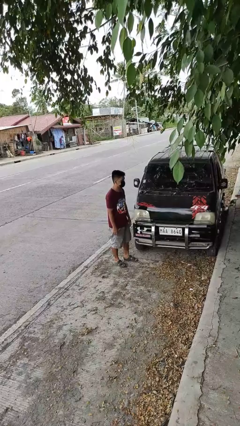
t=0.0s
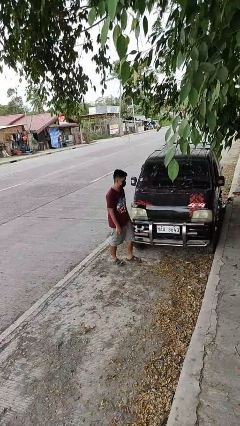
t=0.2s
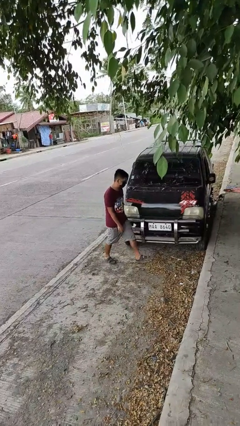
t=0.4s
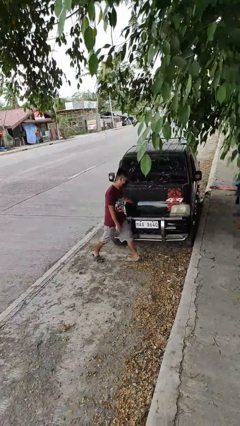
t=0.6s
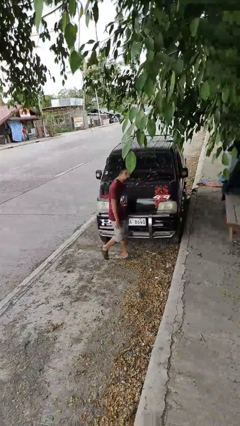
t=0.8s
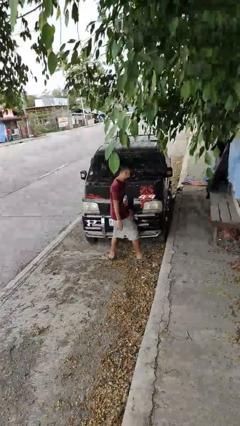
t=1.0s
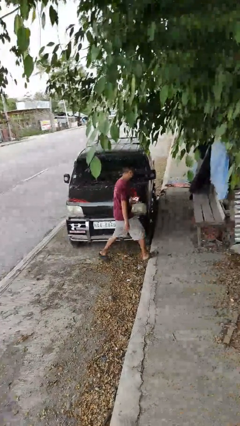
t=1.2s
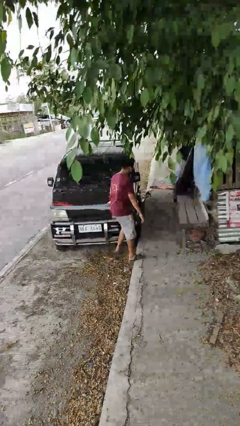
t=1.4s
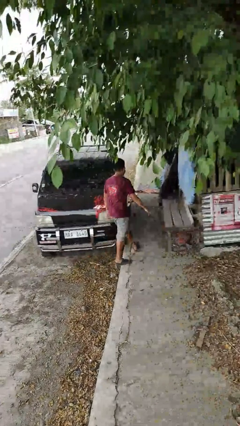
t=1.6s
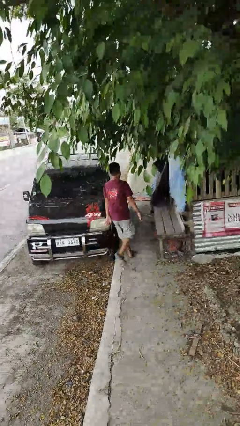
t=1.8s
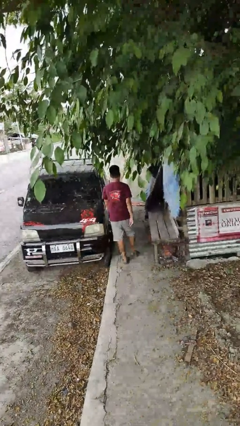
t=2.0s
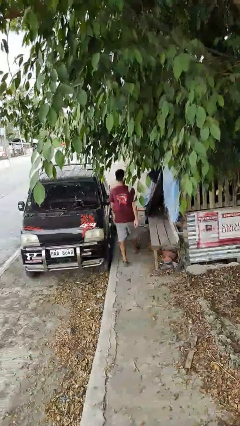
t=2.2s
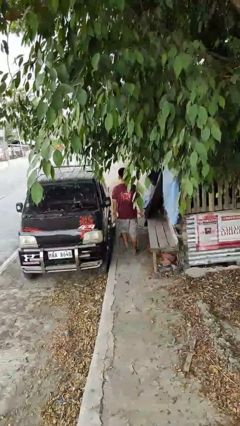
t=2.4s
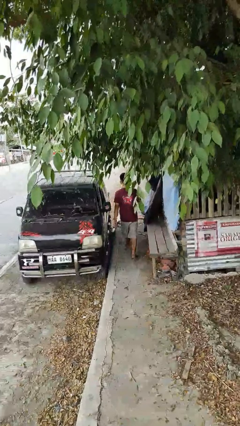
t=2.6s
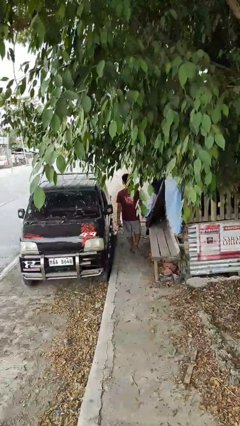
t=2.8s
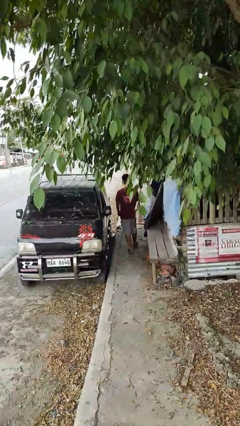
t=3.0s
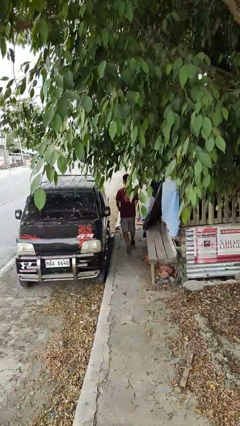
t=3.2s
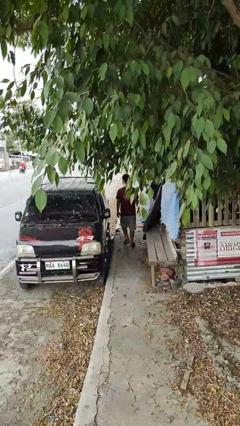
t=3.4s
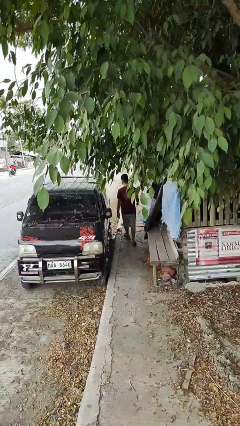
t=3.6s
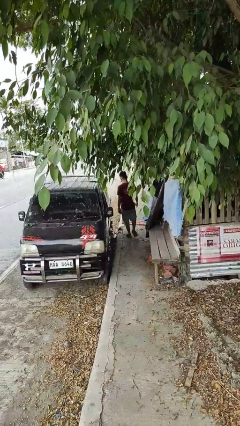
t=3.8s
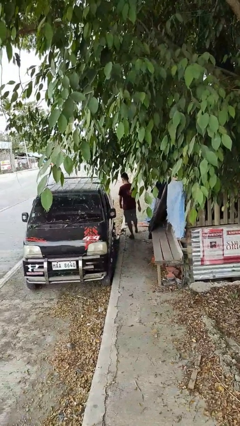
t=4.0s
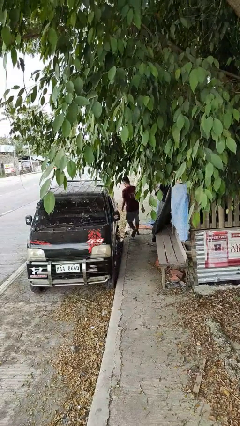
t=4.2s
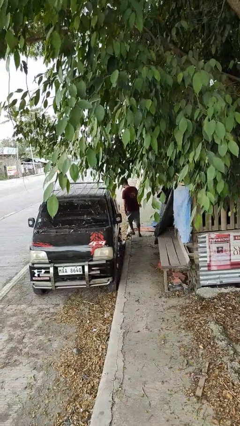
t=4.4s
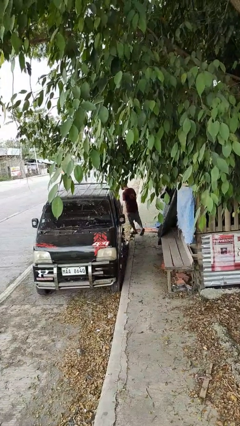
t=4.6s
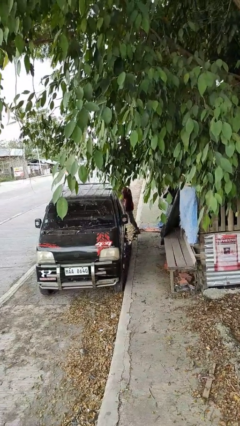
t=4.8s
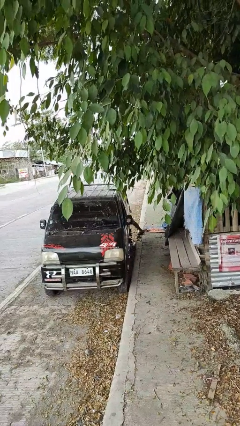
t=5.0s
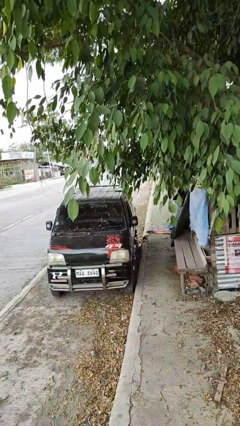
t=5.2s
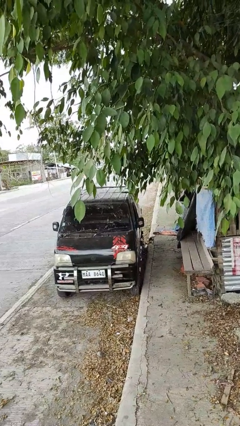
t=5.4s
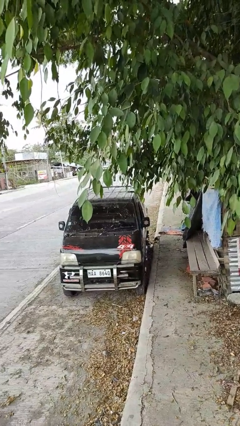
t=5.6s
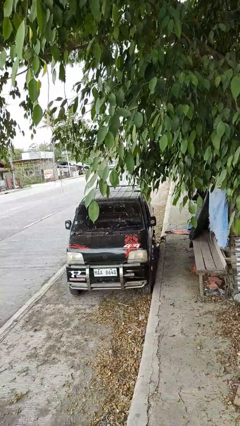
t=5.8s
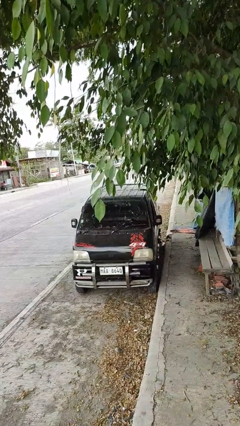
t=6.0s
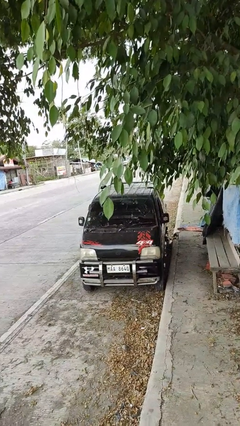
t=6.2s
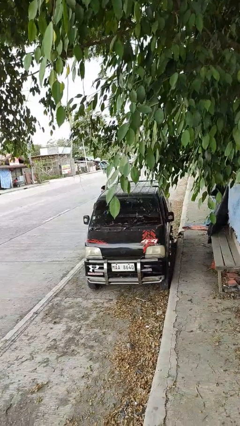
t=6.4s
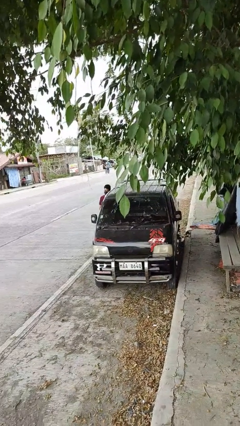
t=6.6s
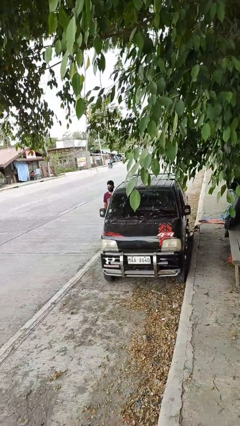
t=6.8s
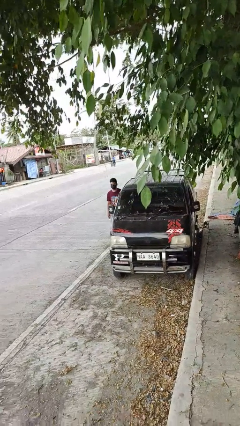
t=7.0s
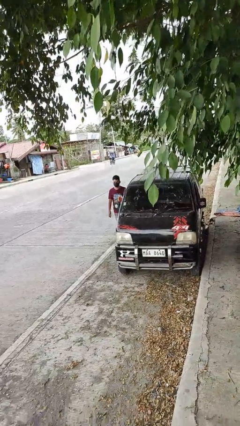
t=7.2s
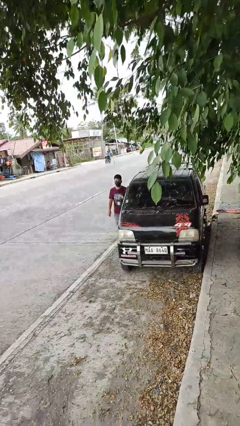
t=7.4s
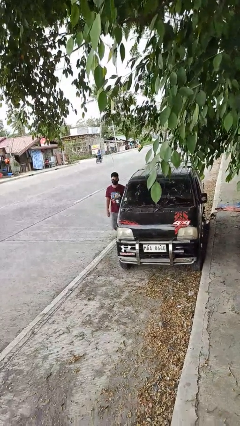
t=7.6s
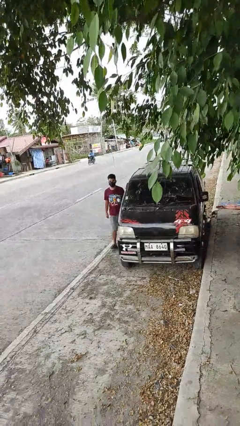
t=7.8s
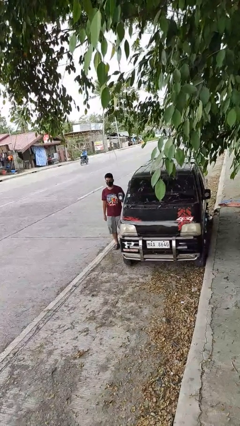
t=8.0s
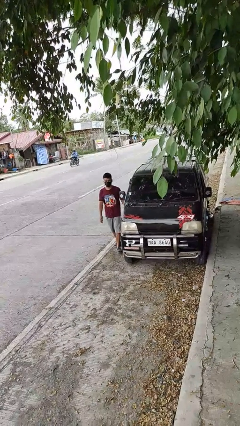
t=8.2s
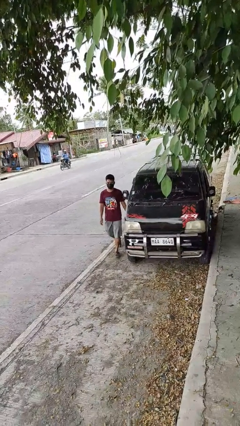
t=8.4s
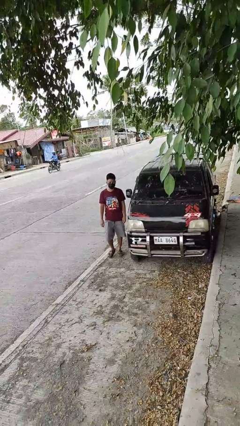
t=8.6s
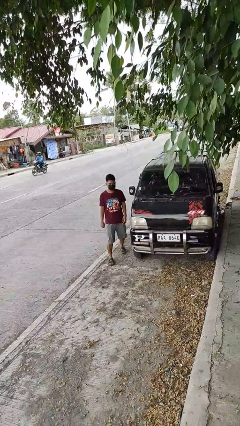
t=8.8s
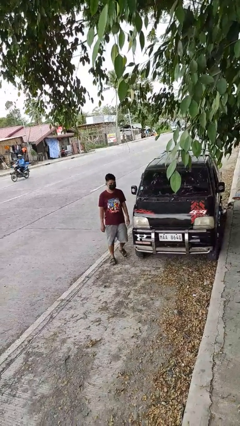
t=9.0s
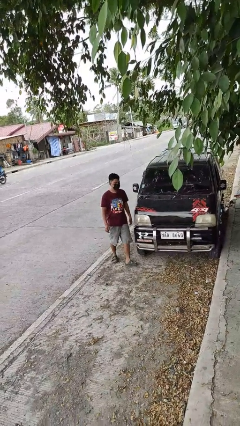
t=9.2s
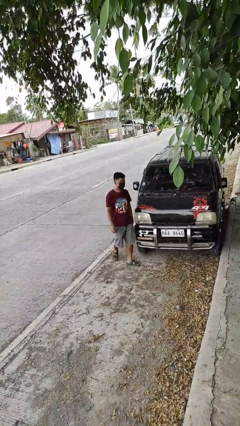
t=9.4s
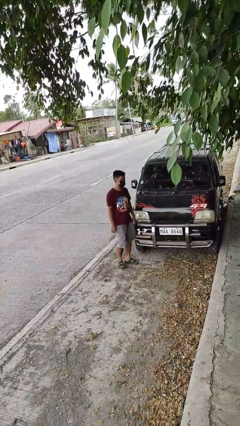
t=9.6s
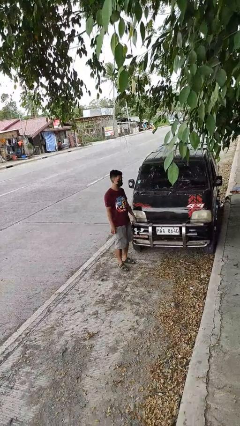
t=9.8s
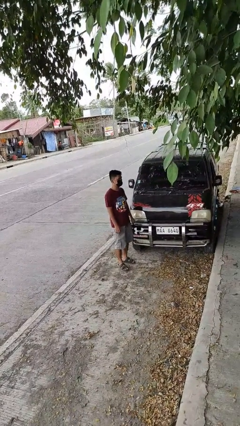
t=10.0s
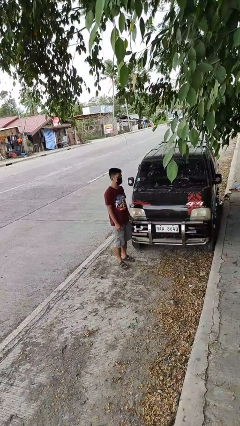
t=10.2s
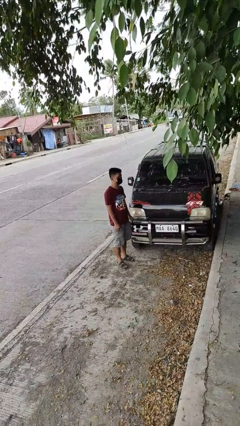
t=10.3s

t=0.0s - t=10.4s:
person walks around car

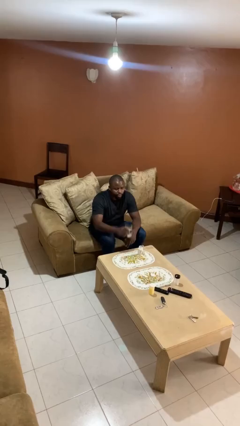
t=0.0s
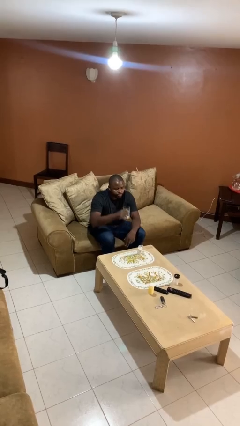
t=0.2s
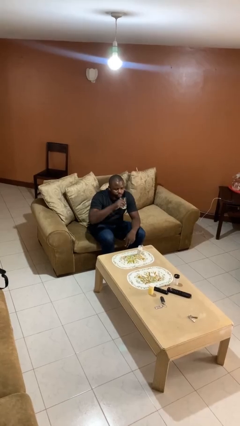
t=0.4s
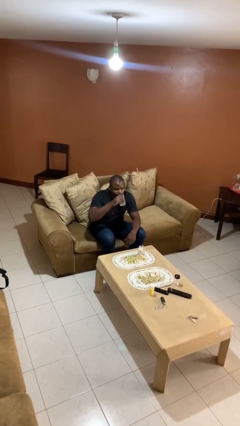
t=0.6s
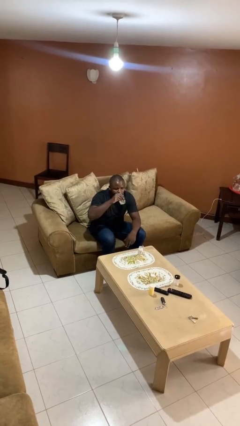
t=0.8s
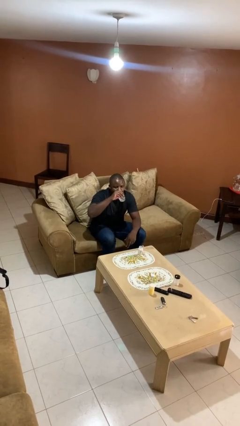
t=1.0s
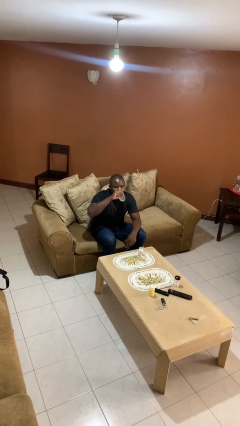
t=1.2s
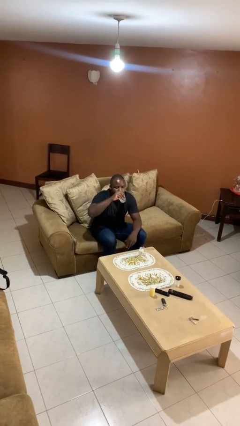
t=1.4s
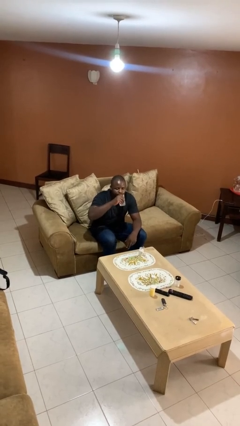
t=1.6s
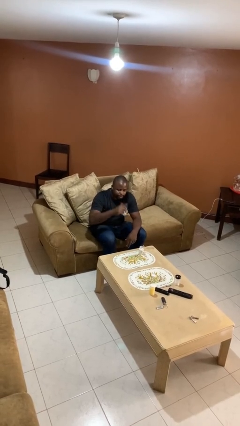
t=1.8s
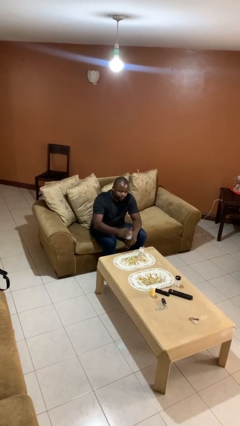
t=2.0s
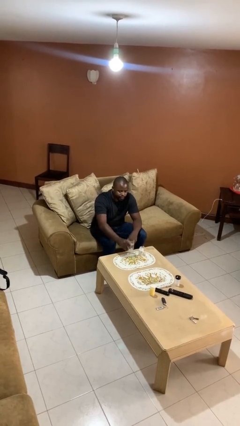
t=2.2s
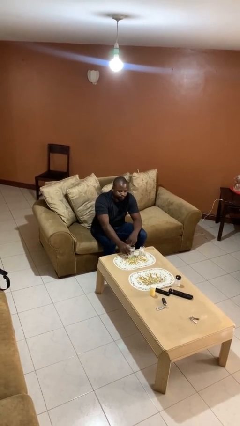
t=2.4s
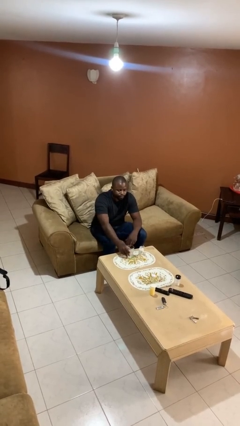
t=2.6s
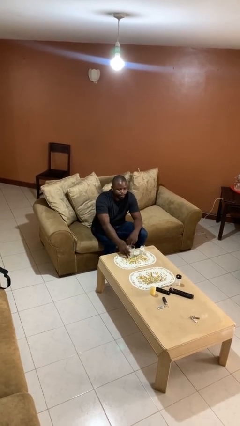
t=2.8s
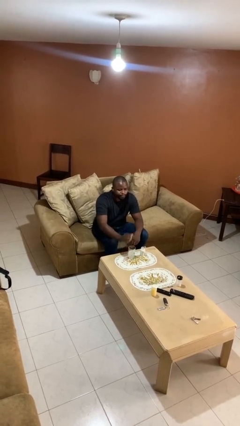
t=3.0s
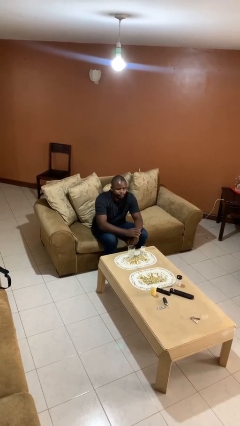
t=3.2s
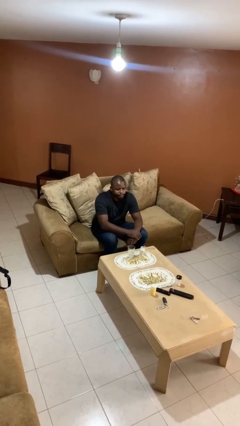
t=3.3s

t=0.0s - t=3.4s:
person drinks from cup

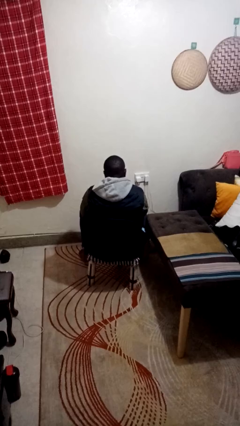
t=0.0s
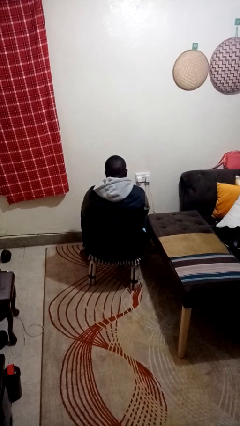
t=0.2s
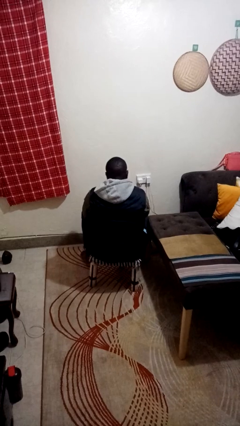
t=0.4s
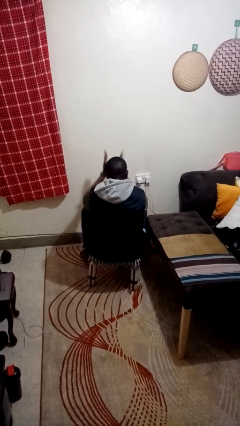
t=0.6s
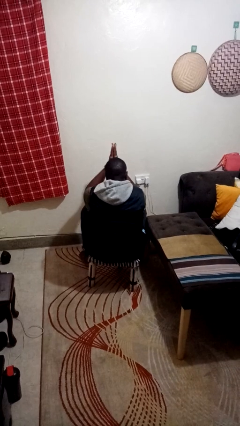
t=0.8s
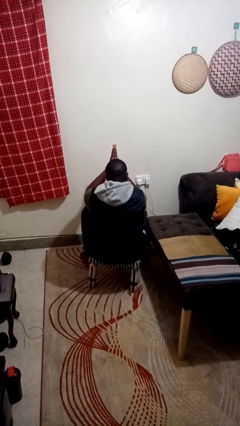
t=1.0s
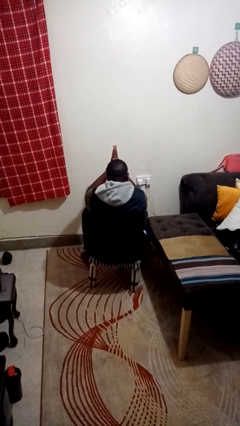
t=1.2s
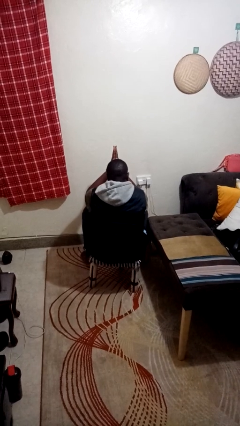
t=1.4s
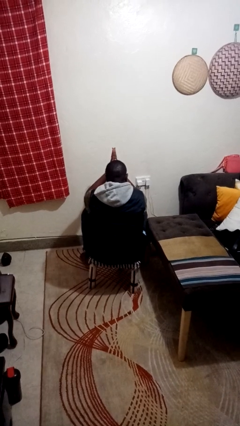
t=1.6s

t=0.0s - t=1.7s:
person claps hands

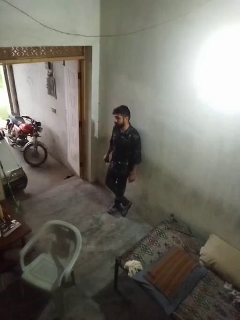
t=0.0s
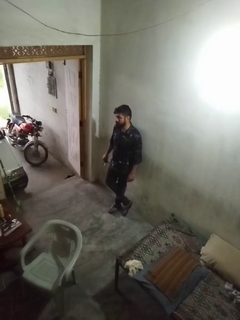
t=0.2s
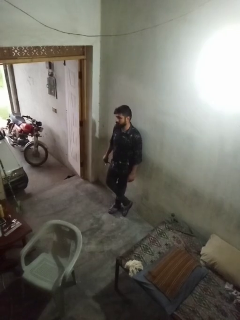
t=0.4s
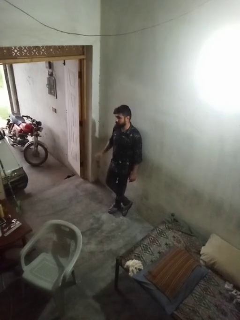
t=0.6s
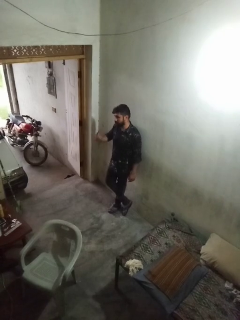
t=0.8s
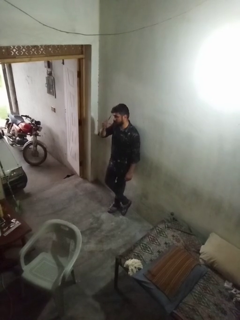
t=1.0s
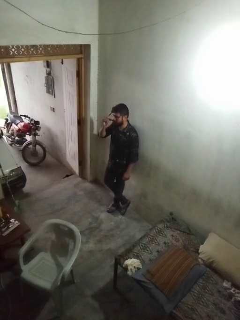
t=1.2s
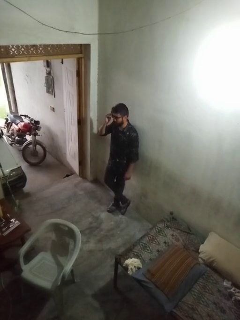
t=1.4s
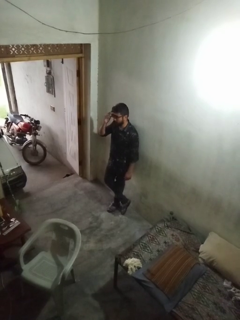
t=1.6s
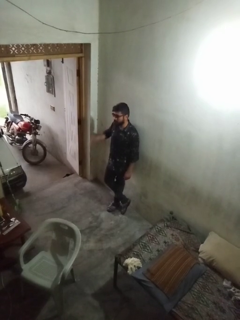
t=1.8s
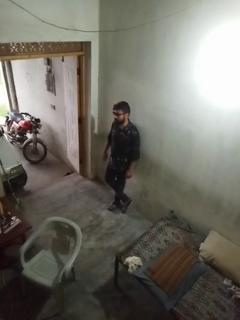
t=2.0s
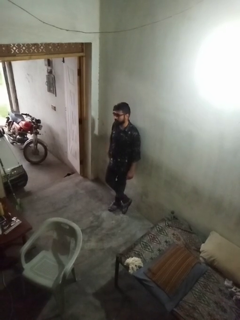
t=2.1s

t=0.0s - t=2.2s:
person puts on sunglasses

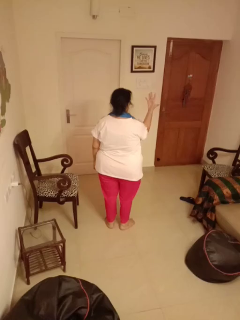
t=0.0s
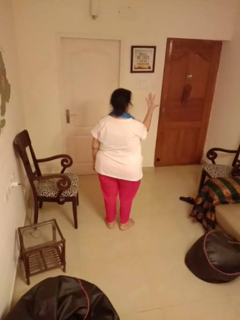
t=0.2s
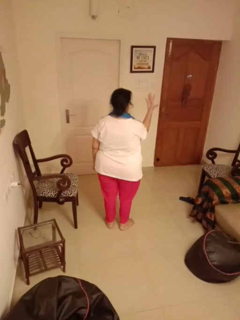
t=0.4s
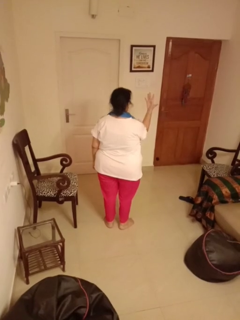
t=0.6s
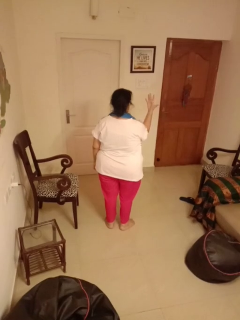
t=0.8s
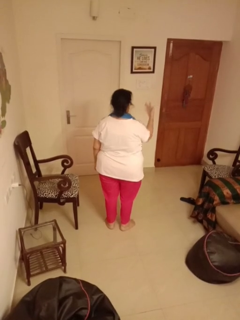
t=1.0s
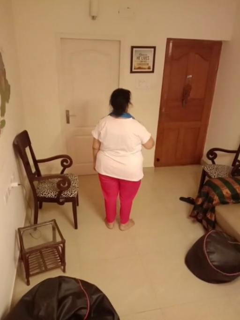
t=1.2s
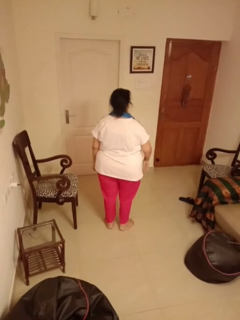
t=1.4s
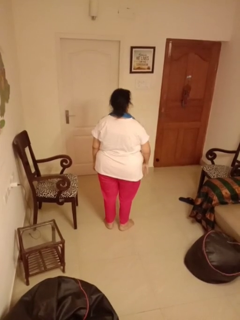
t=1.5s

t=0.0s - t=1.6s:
person gestures number five
